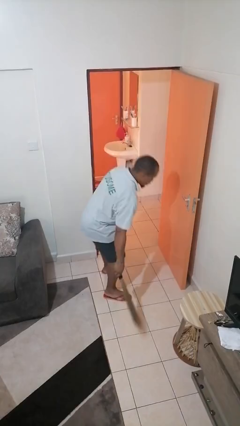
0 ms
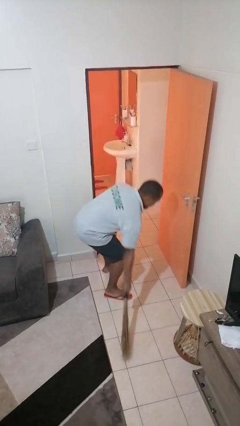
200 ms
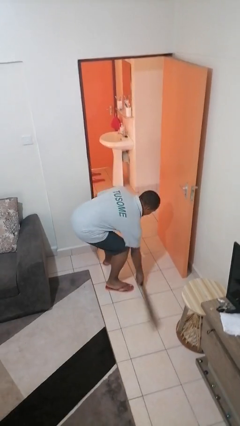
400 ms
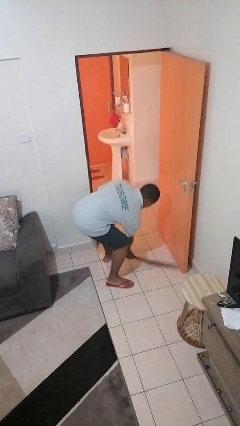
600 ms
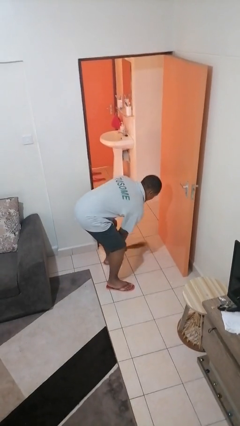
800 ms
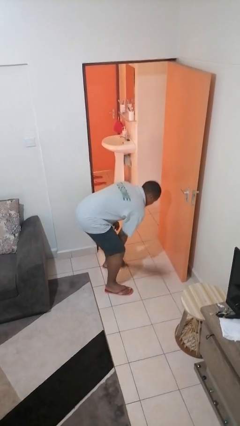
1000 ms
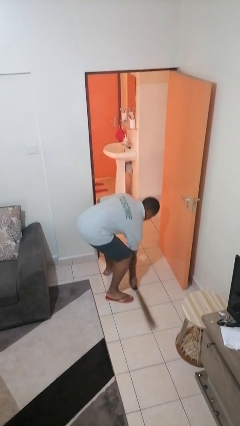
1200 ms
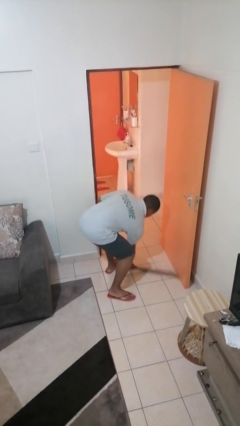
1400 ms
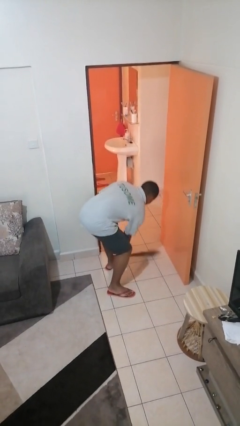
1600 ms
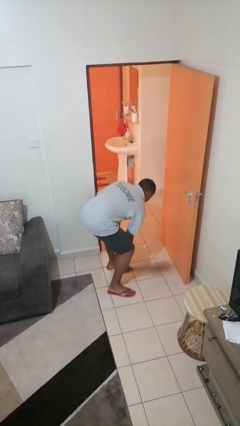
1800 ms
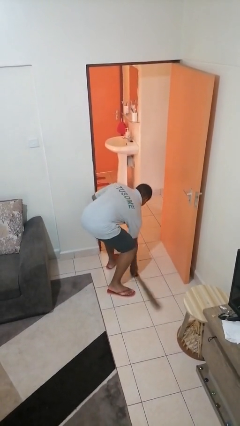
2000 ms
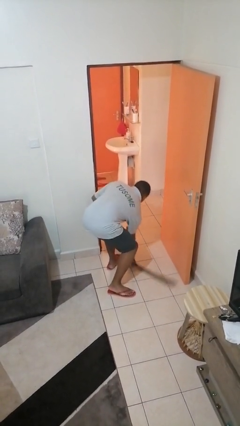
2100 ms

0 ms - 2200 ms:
person sweeps floor

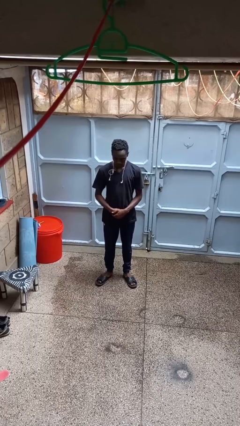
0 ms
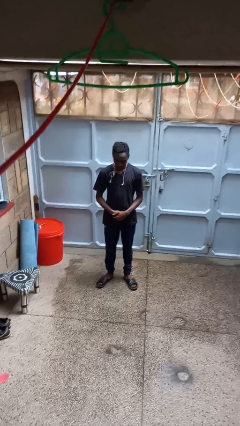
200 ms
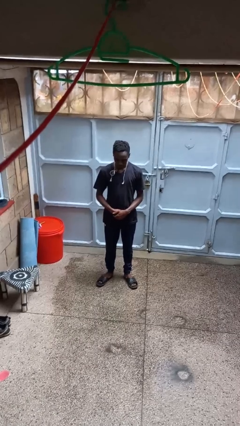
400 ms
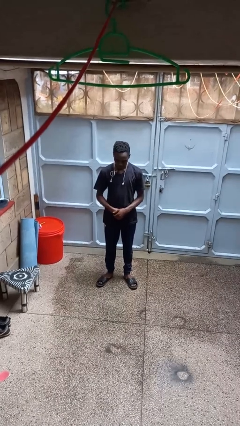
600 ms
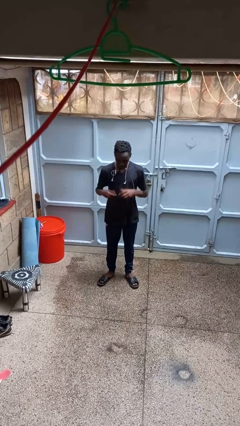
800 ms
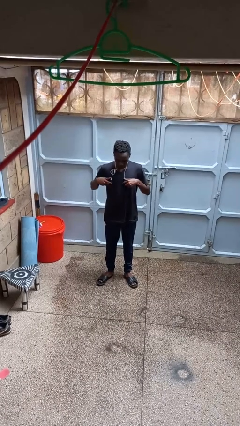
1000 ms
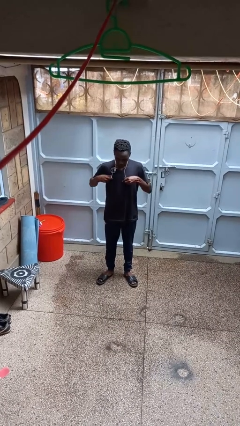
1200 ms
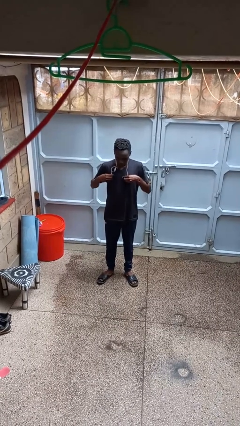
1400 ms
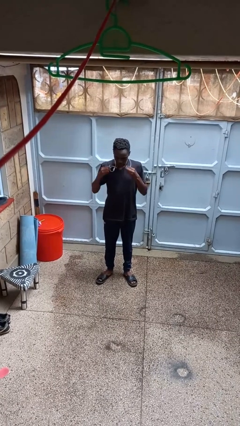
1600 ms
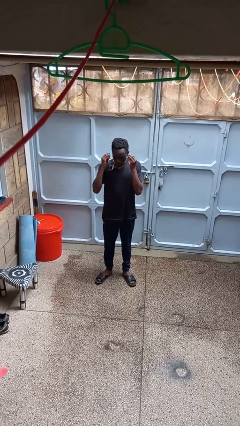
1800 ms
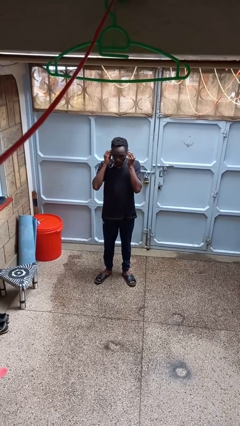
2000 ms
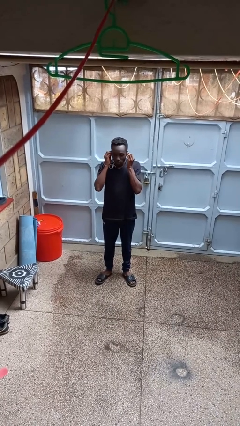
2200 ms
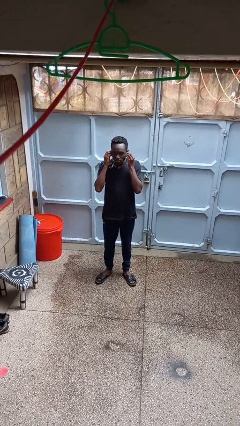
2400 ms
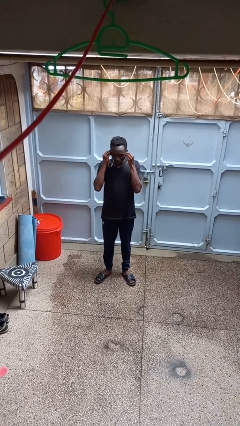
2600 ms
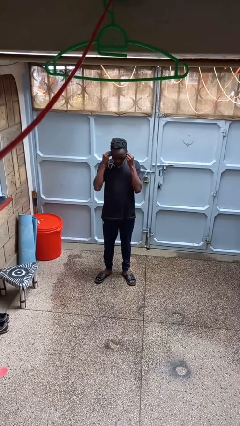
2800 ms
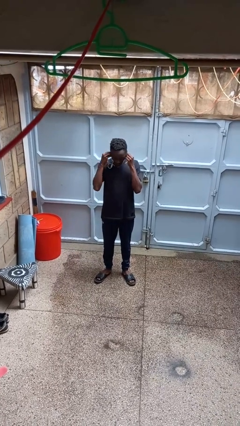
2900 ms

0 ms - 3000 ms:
person puts on headphones

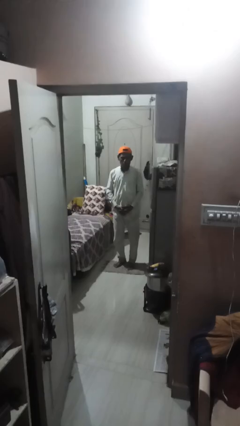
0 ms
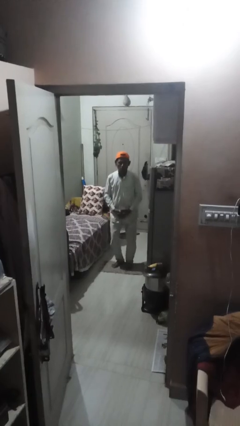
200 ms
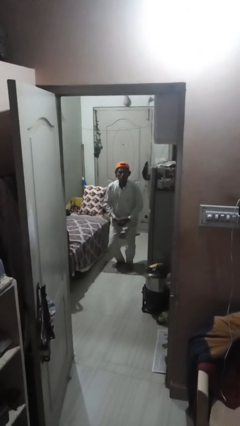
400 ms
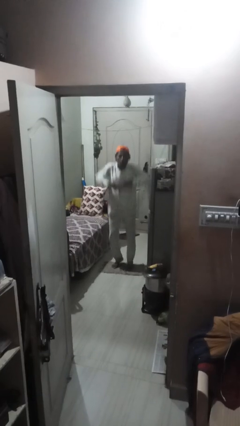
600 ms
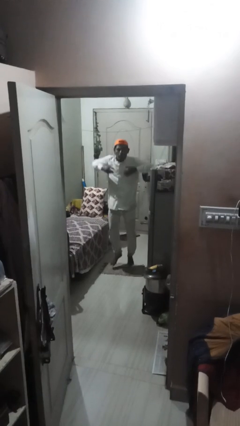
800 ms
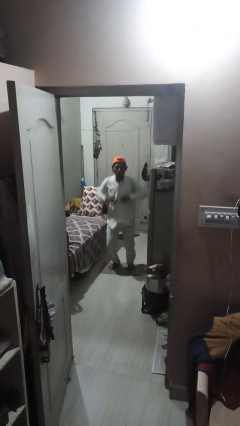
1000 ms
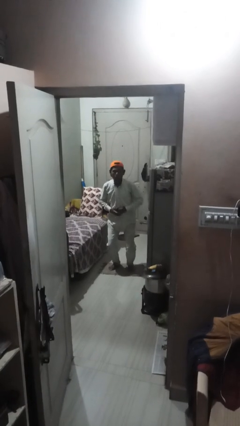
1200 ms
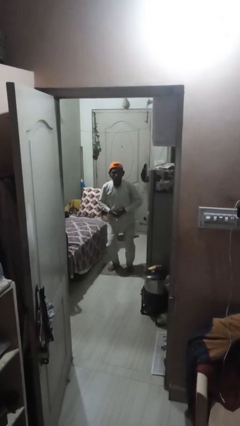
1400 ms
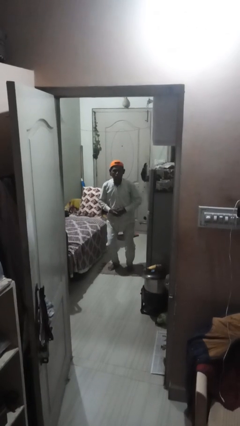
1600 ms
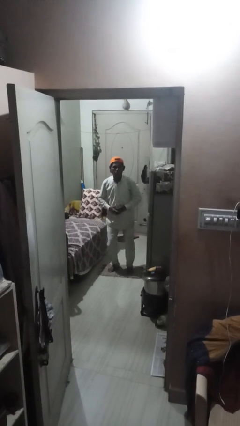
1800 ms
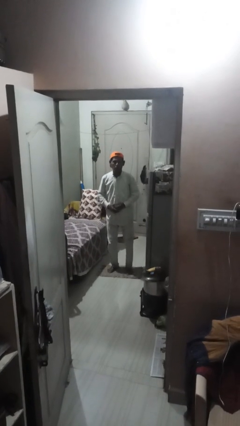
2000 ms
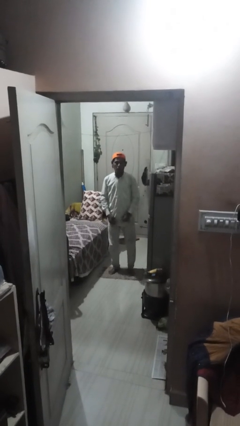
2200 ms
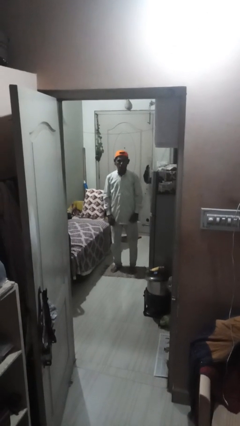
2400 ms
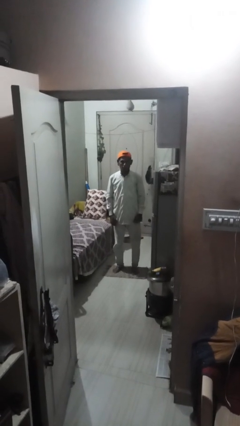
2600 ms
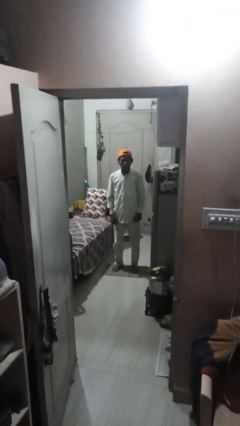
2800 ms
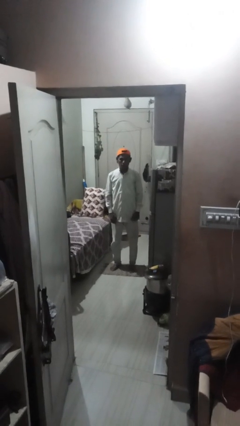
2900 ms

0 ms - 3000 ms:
person jumps

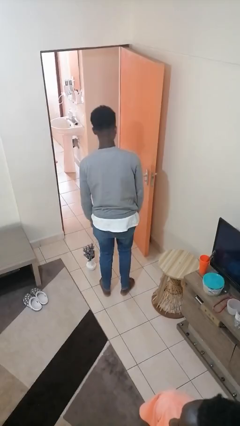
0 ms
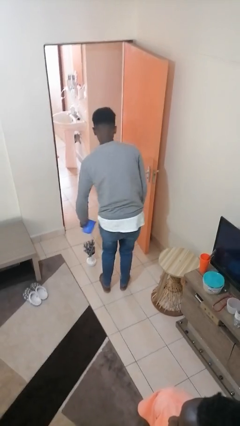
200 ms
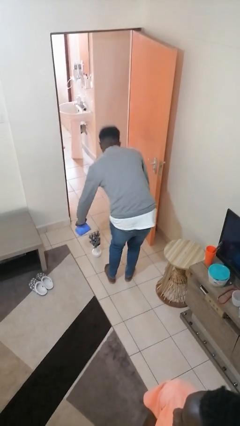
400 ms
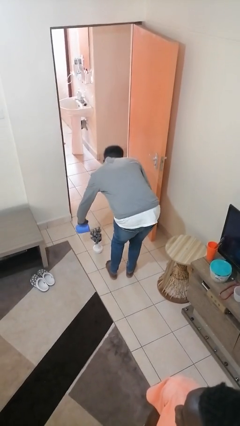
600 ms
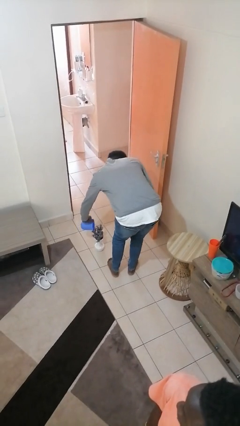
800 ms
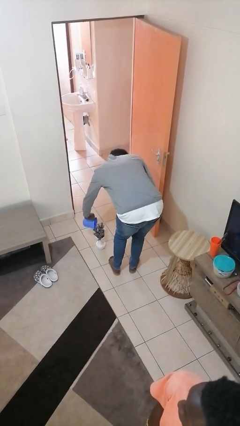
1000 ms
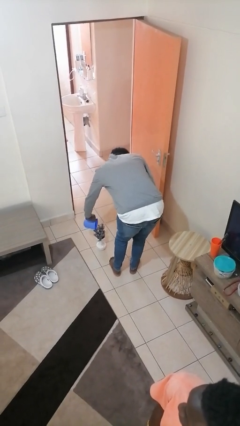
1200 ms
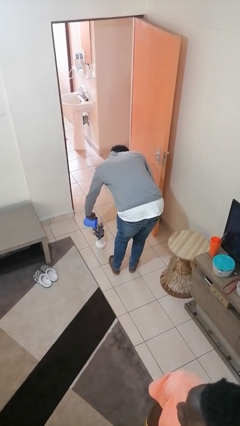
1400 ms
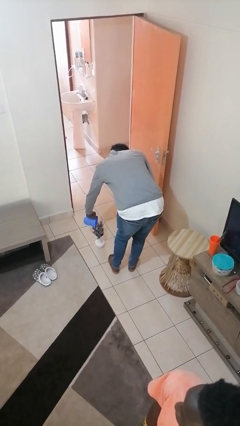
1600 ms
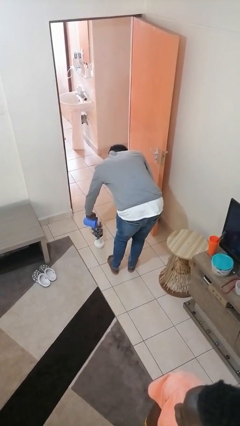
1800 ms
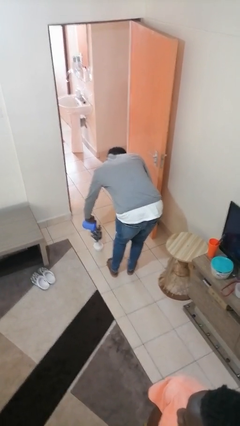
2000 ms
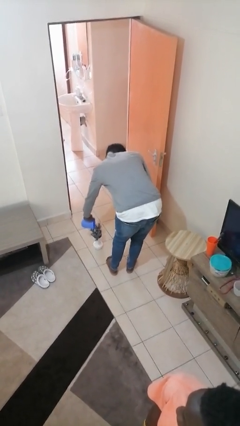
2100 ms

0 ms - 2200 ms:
person waters houseplant

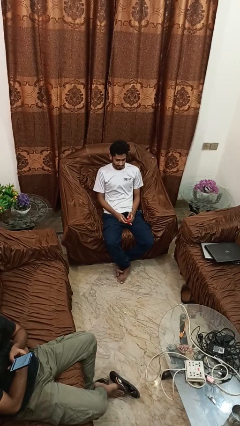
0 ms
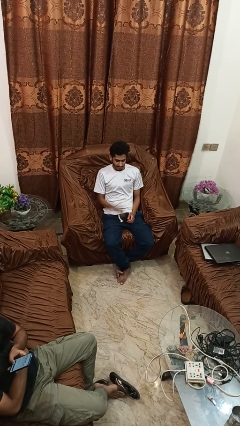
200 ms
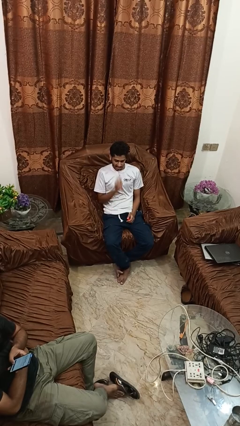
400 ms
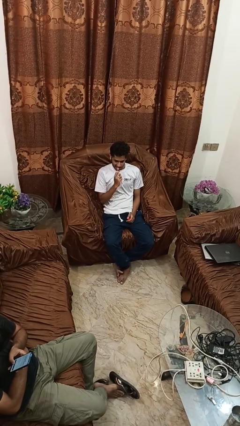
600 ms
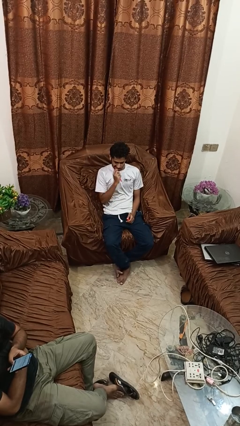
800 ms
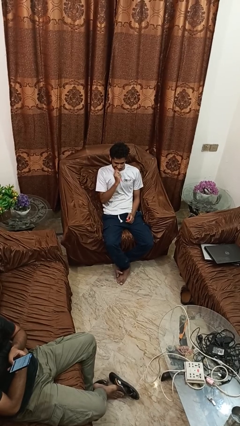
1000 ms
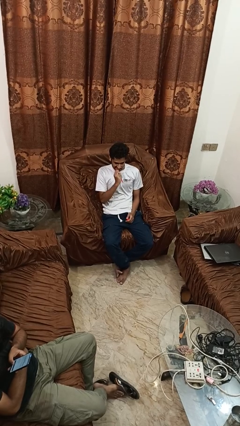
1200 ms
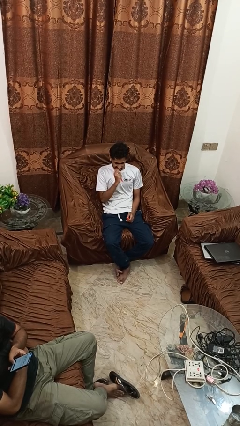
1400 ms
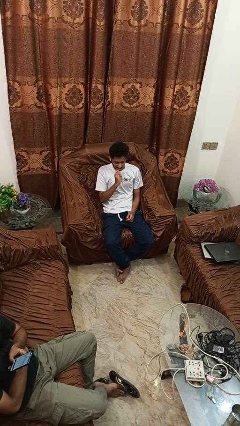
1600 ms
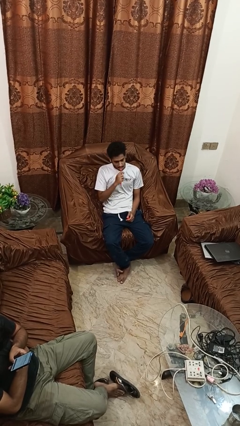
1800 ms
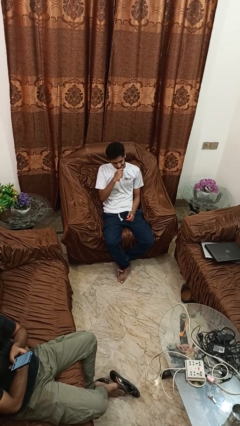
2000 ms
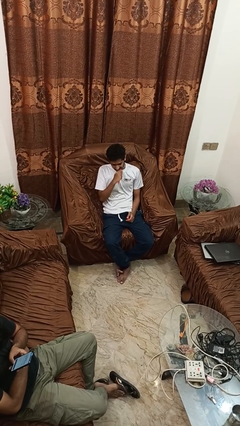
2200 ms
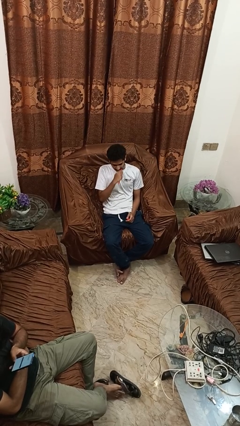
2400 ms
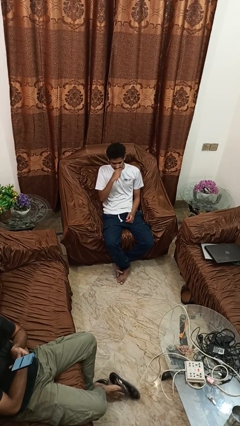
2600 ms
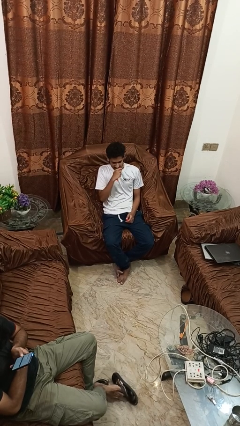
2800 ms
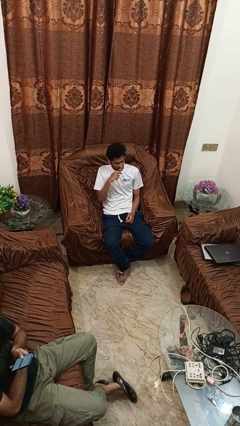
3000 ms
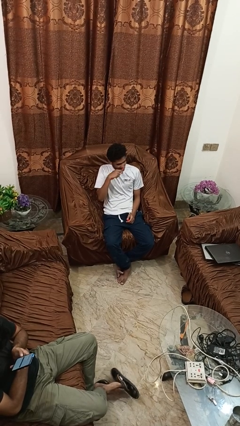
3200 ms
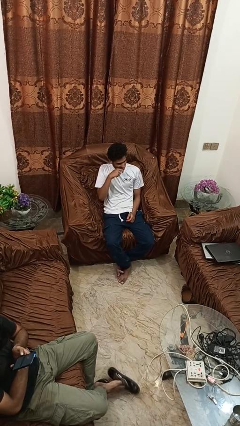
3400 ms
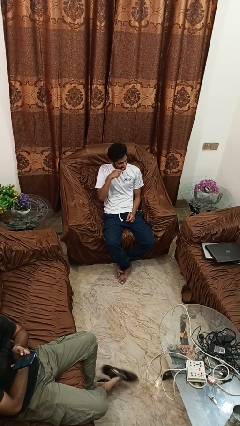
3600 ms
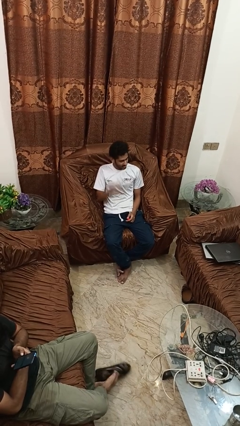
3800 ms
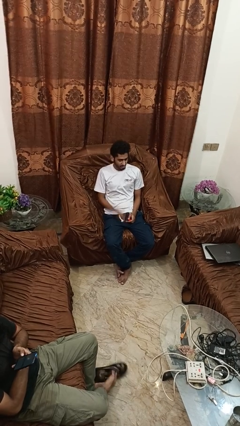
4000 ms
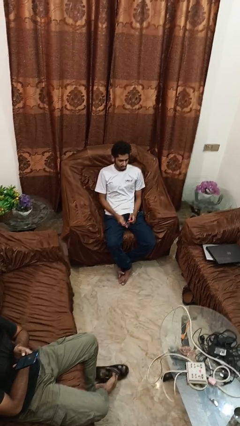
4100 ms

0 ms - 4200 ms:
person brushes teeth

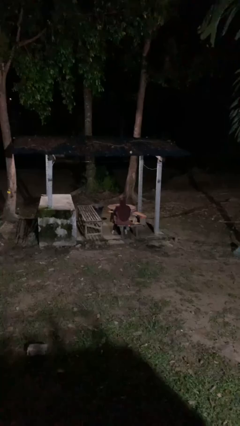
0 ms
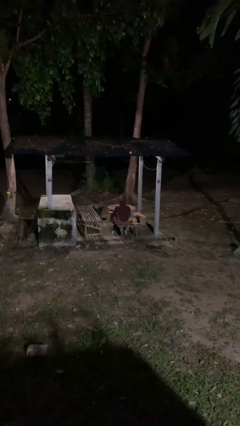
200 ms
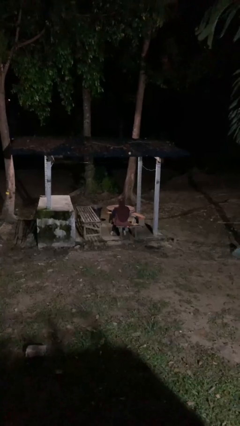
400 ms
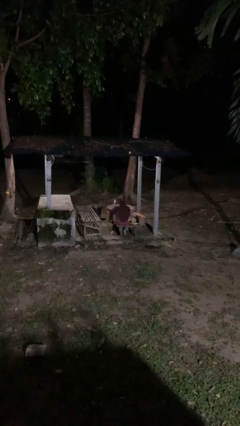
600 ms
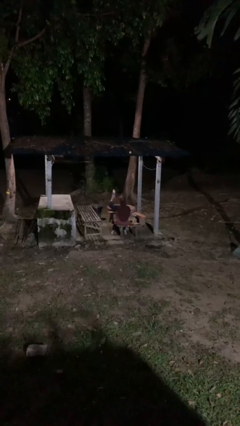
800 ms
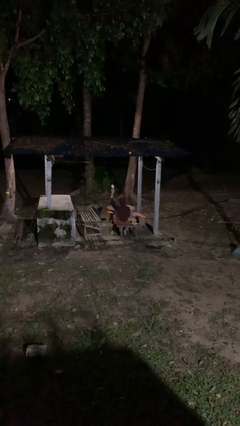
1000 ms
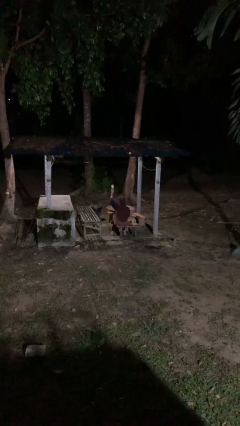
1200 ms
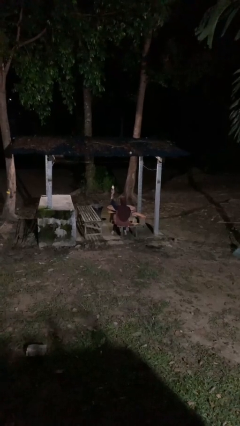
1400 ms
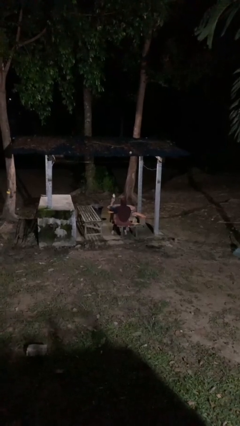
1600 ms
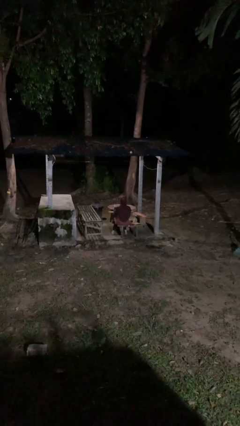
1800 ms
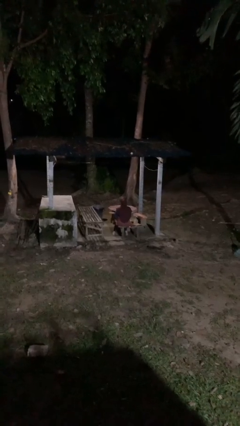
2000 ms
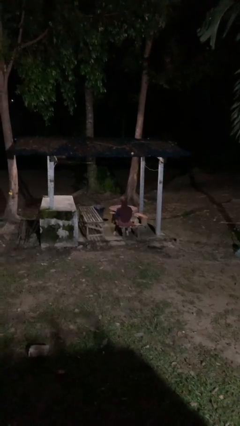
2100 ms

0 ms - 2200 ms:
person holds object above head

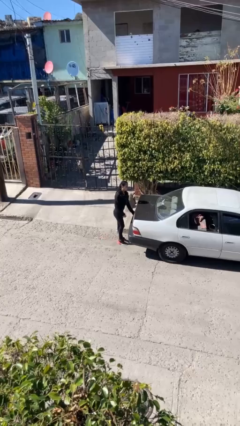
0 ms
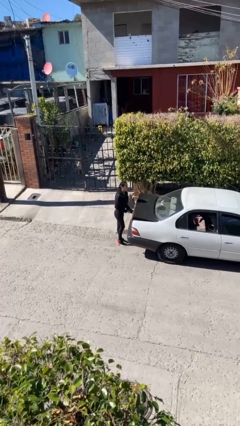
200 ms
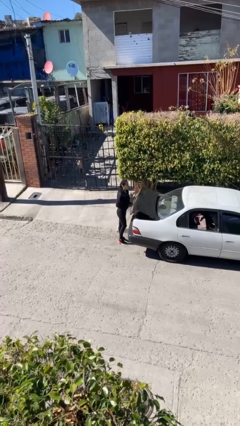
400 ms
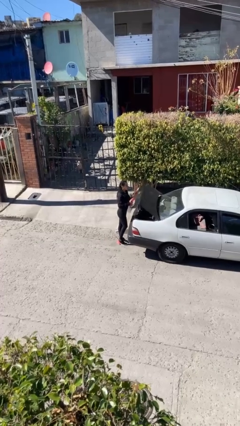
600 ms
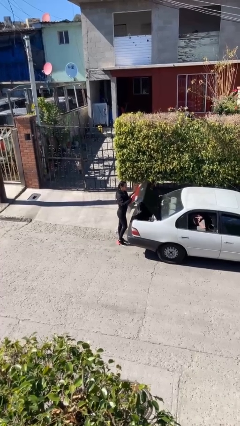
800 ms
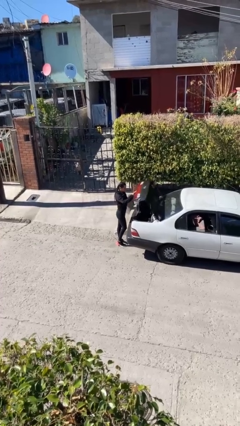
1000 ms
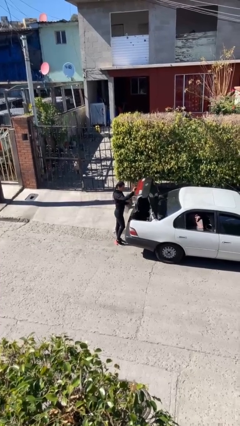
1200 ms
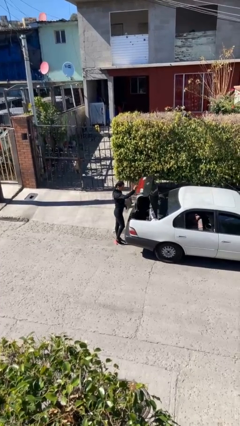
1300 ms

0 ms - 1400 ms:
person opens car trunk
